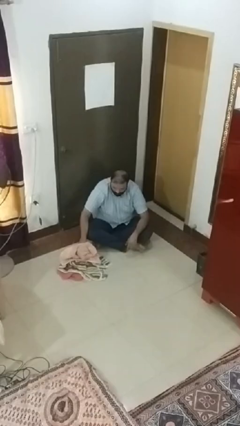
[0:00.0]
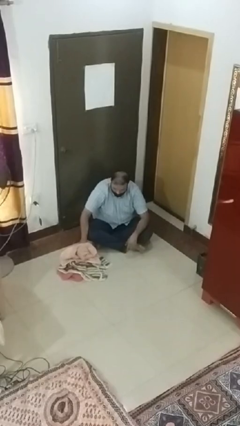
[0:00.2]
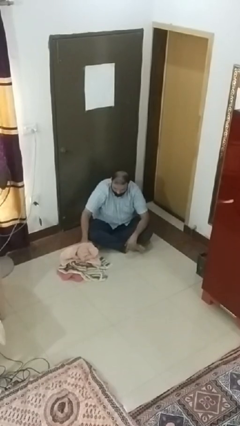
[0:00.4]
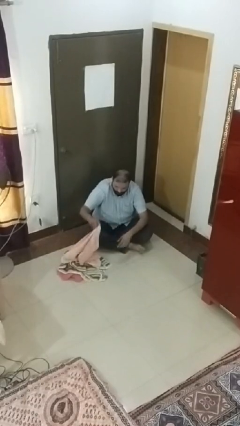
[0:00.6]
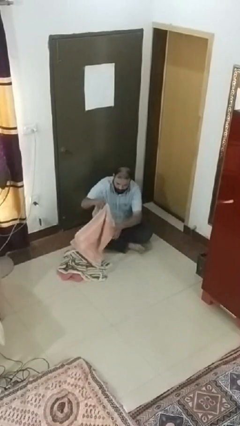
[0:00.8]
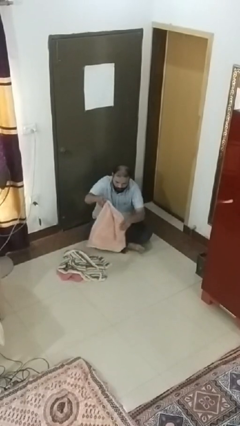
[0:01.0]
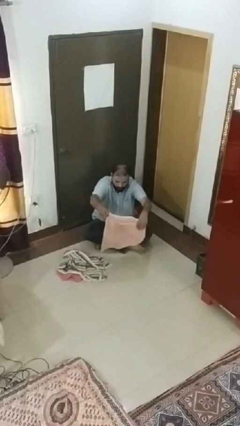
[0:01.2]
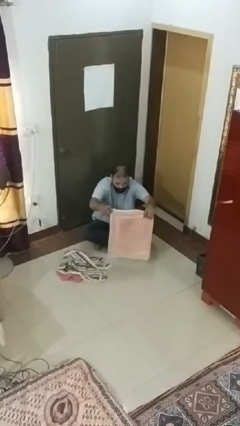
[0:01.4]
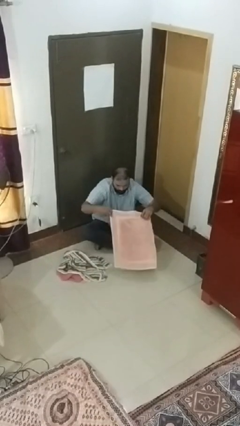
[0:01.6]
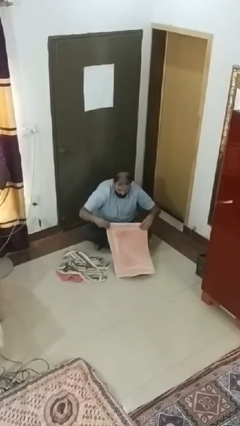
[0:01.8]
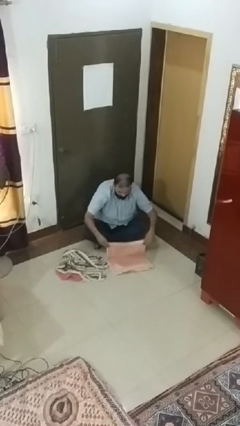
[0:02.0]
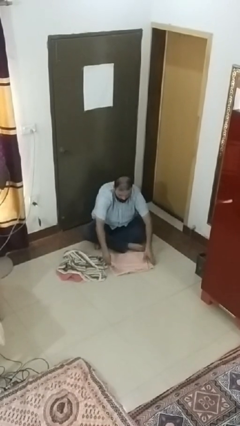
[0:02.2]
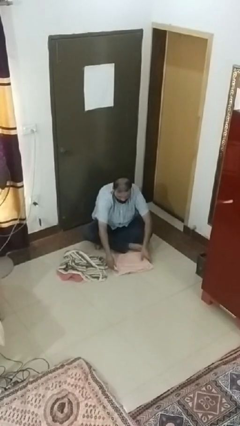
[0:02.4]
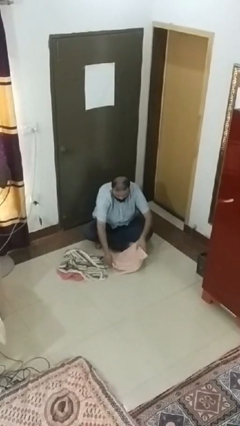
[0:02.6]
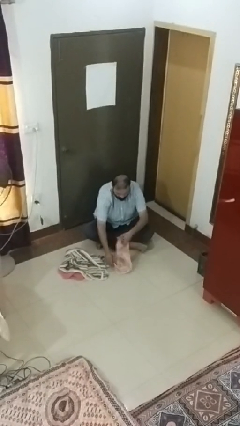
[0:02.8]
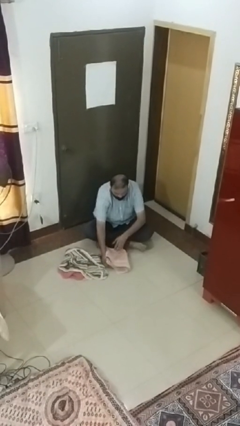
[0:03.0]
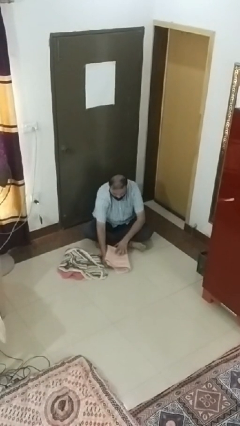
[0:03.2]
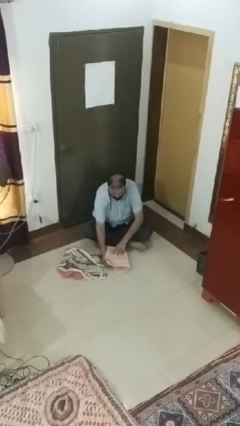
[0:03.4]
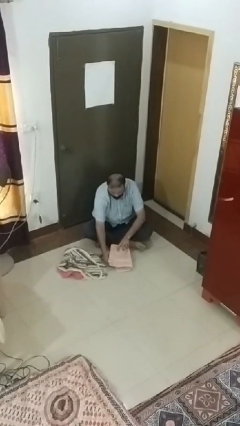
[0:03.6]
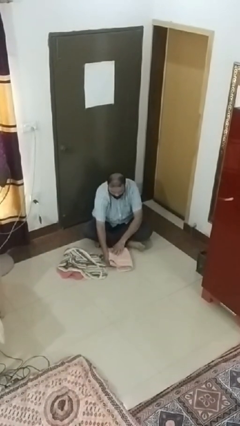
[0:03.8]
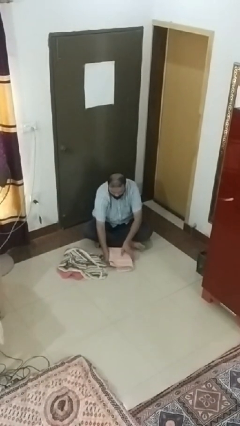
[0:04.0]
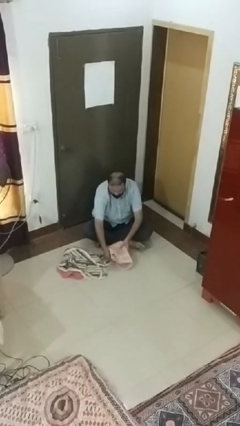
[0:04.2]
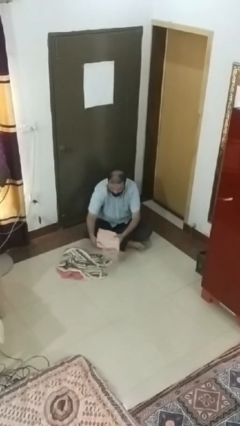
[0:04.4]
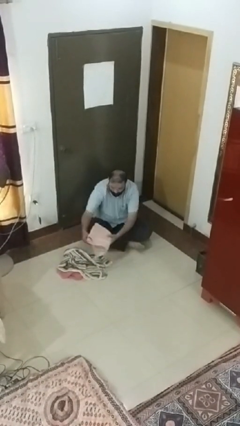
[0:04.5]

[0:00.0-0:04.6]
person folds towel

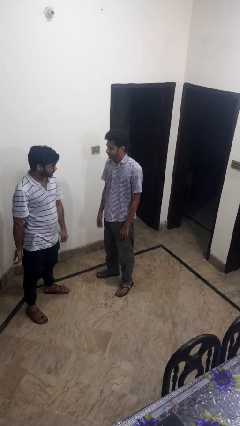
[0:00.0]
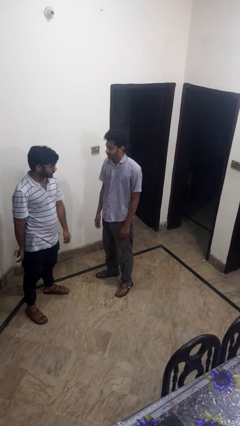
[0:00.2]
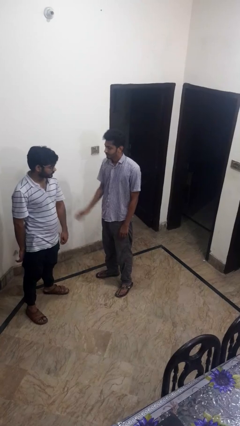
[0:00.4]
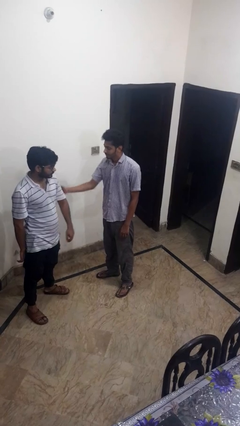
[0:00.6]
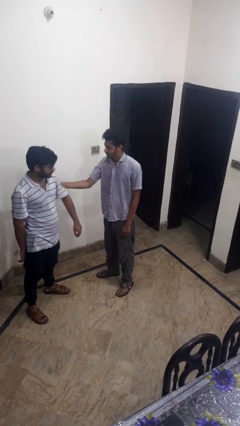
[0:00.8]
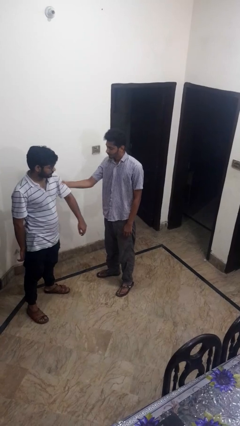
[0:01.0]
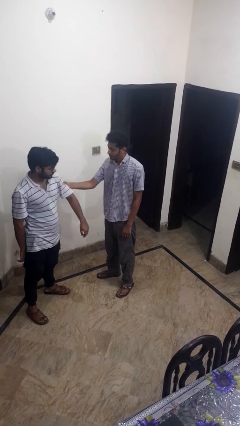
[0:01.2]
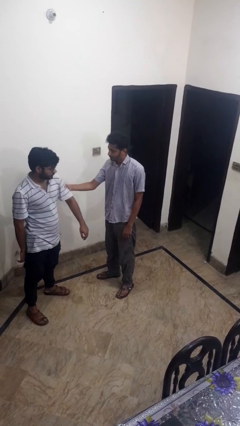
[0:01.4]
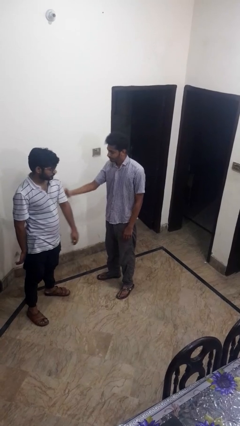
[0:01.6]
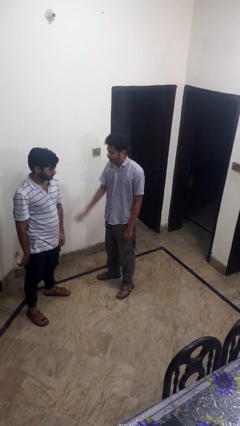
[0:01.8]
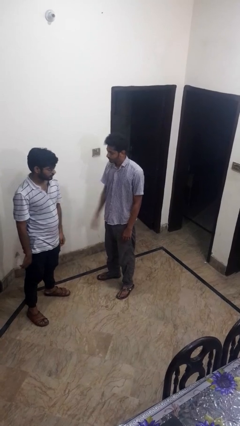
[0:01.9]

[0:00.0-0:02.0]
person grabs person by bicep

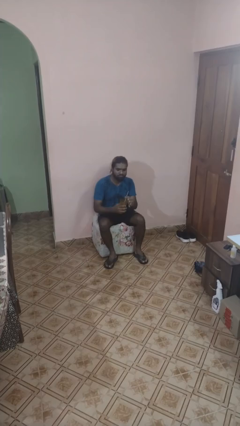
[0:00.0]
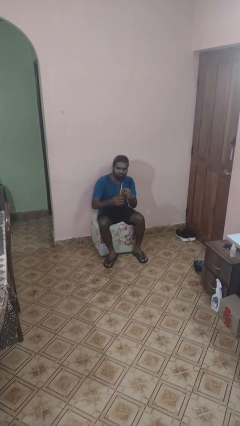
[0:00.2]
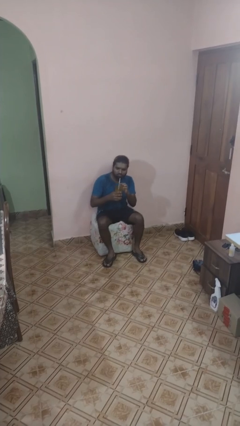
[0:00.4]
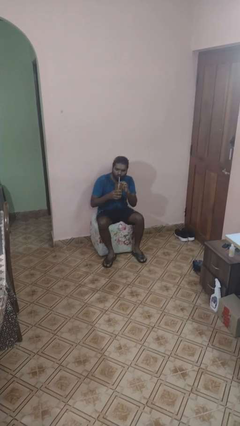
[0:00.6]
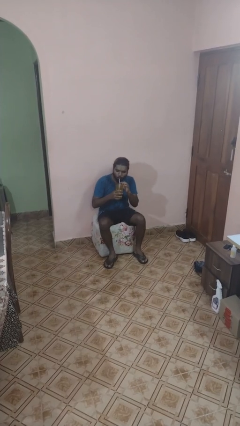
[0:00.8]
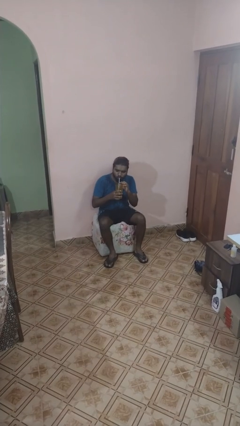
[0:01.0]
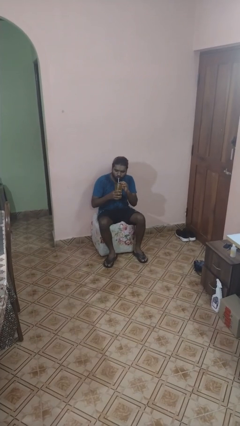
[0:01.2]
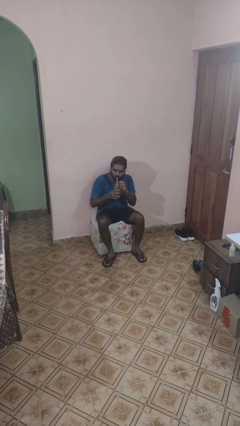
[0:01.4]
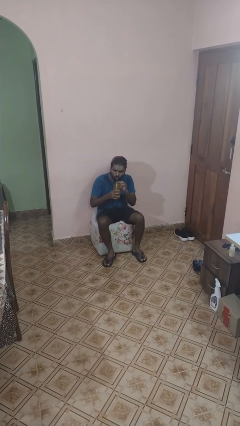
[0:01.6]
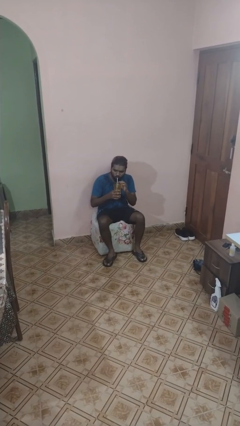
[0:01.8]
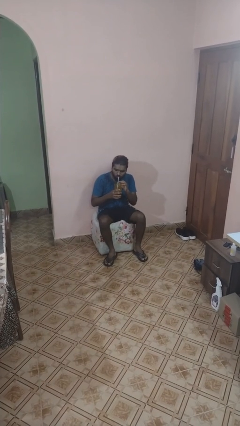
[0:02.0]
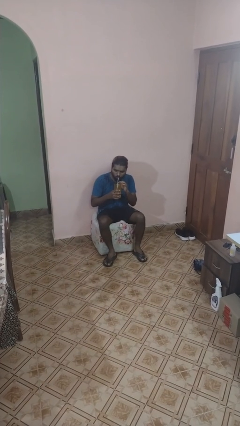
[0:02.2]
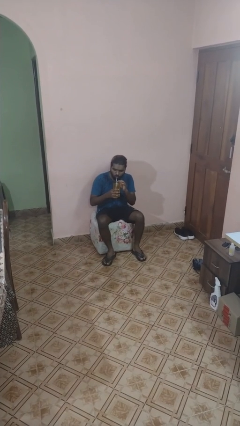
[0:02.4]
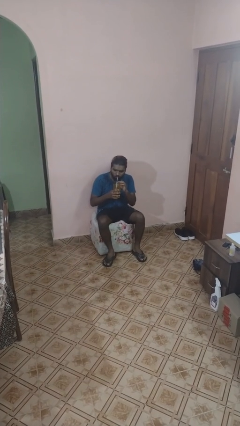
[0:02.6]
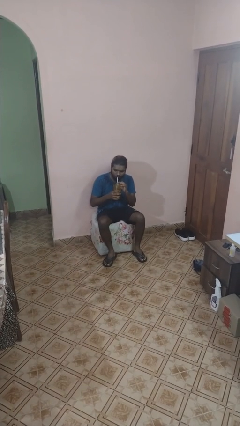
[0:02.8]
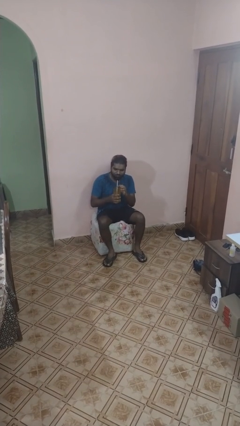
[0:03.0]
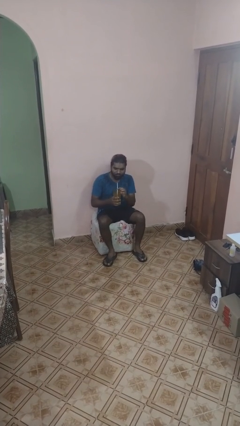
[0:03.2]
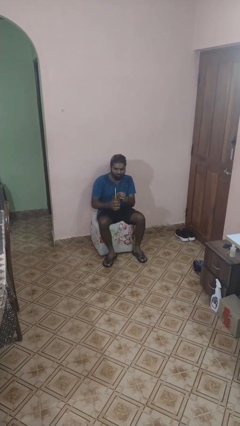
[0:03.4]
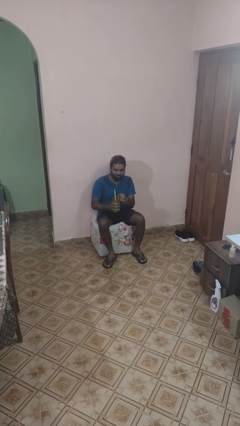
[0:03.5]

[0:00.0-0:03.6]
person drinks from straw

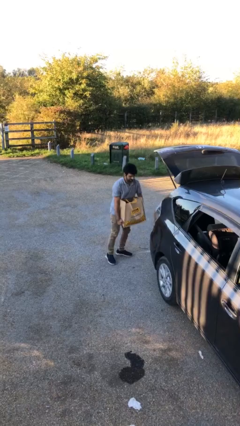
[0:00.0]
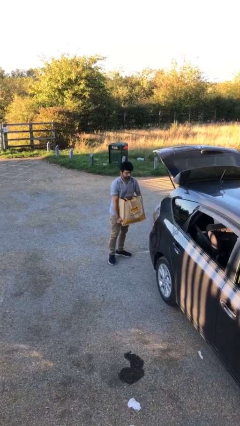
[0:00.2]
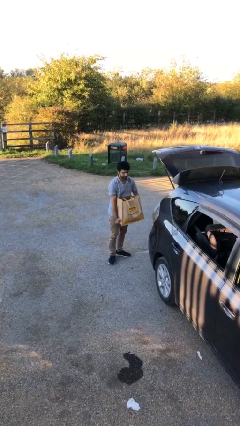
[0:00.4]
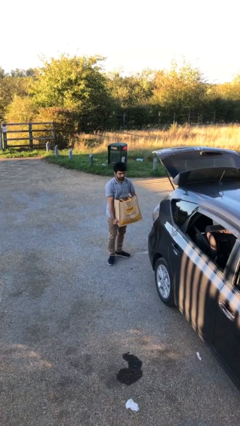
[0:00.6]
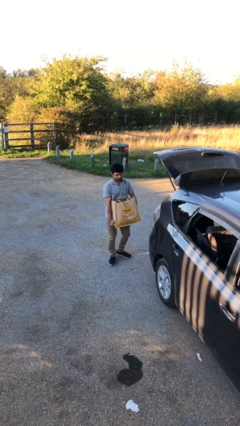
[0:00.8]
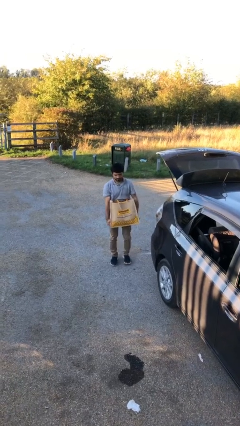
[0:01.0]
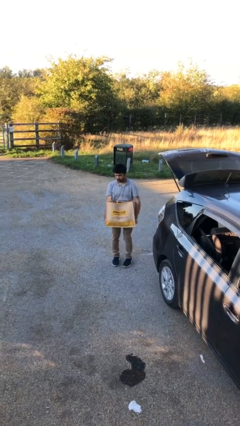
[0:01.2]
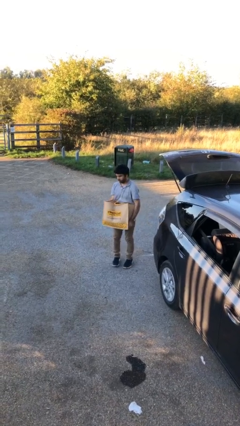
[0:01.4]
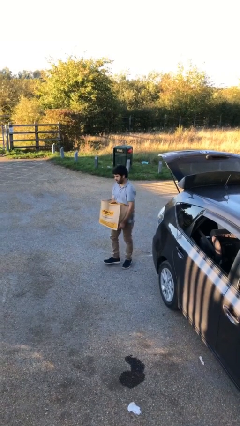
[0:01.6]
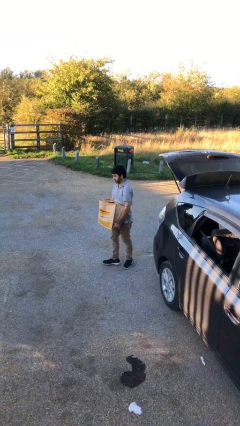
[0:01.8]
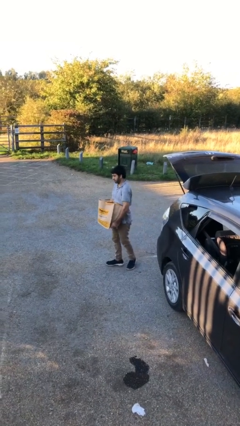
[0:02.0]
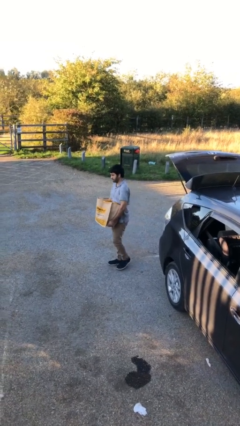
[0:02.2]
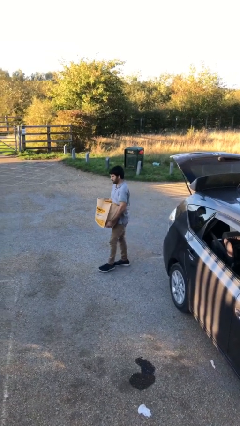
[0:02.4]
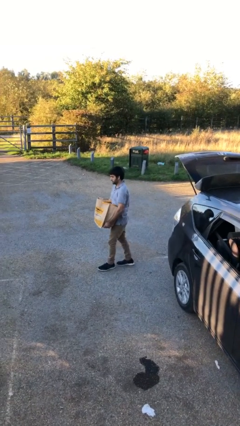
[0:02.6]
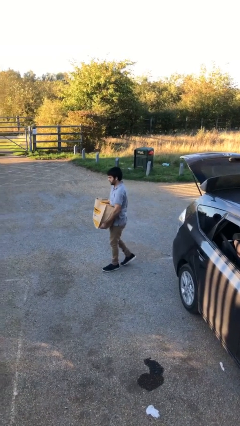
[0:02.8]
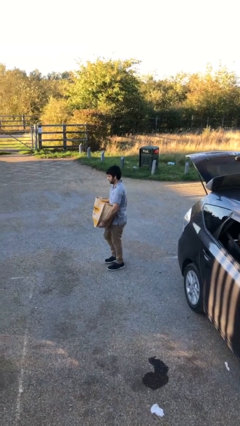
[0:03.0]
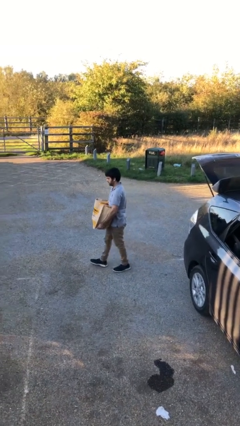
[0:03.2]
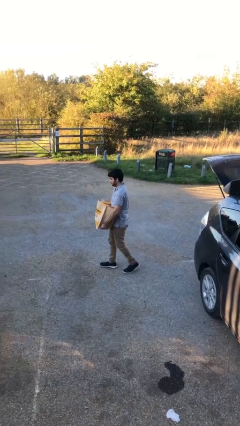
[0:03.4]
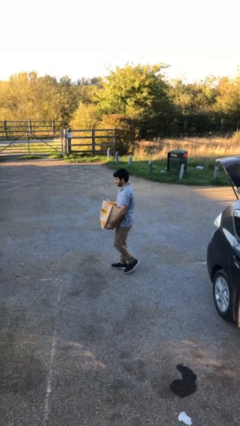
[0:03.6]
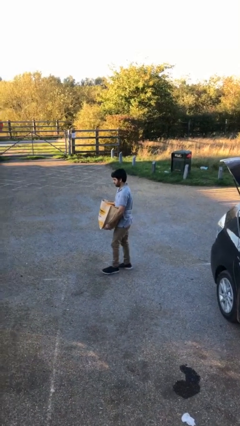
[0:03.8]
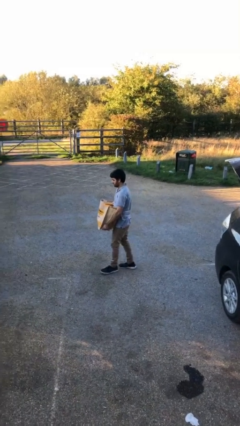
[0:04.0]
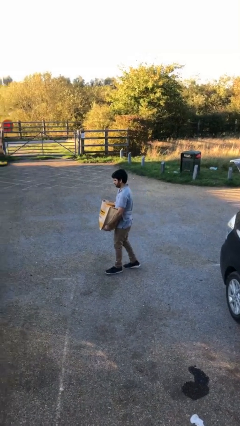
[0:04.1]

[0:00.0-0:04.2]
person carries heavy object

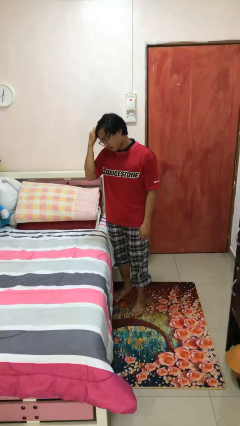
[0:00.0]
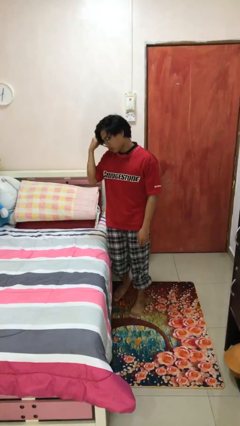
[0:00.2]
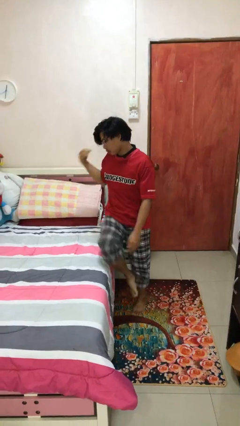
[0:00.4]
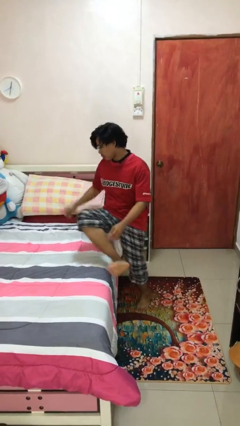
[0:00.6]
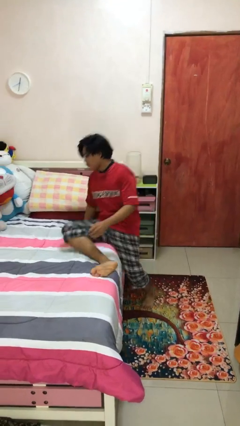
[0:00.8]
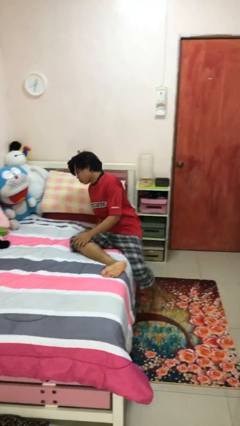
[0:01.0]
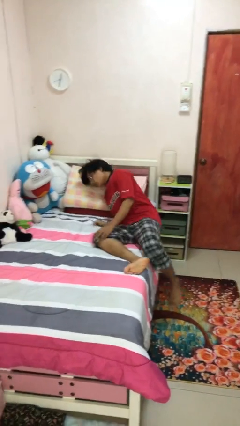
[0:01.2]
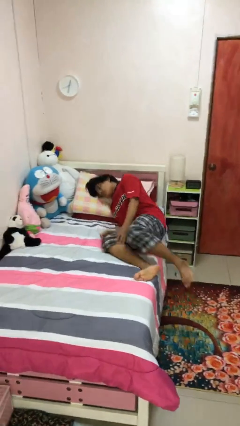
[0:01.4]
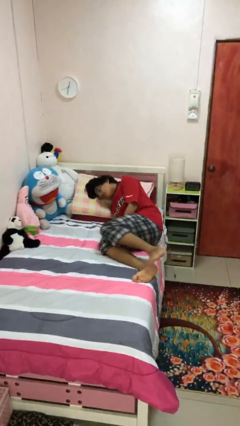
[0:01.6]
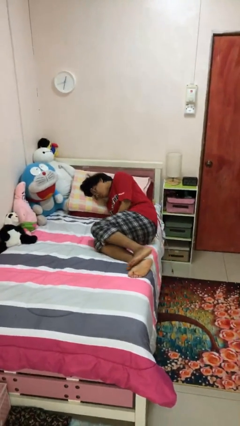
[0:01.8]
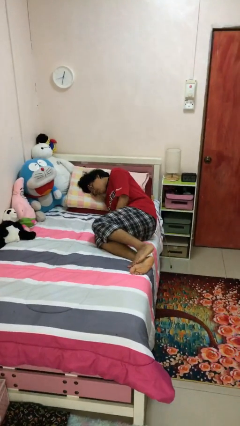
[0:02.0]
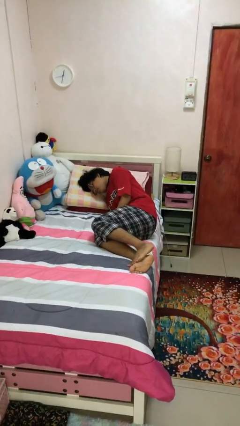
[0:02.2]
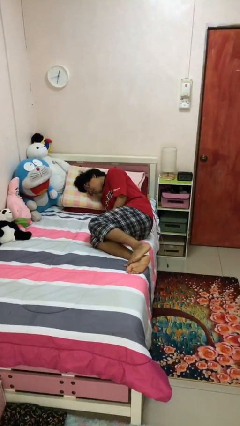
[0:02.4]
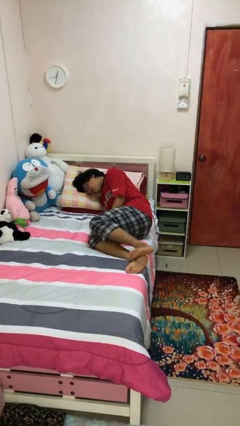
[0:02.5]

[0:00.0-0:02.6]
person lies down on bed

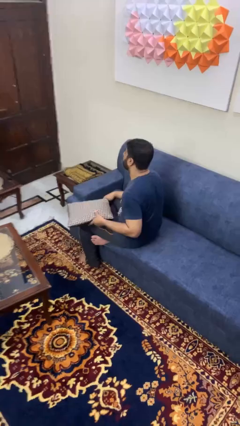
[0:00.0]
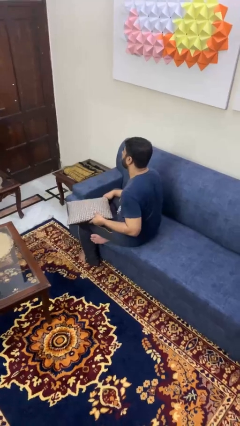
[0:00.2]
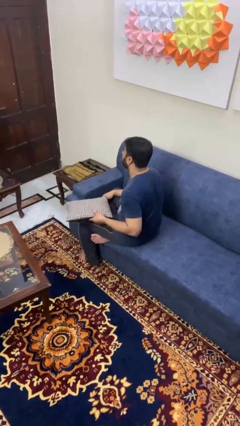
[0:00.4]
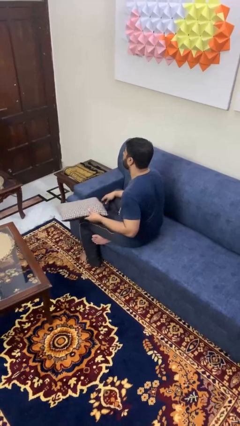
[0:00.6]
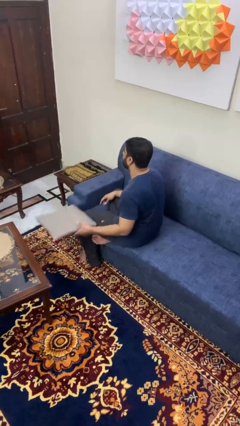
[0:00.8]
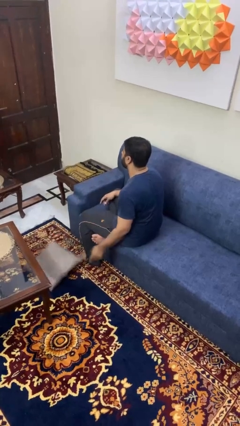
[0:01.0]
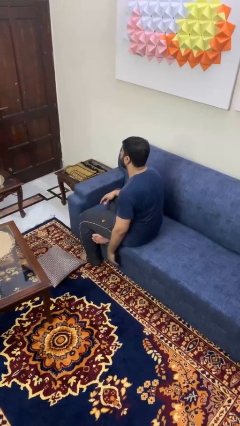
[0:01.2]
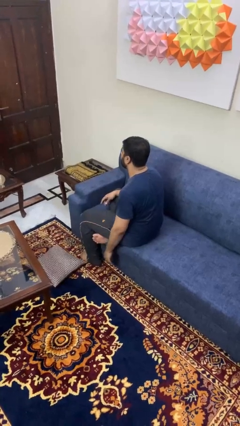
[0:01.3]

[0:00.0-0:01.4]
person throws object to ground
